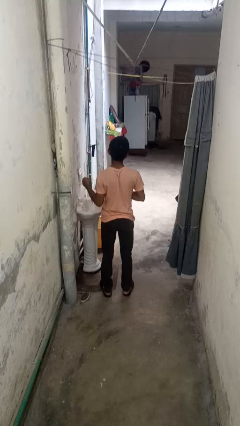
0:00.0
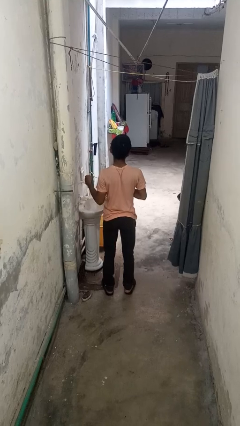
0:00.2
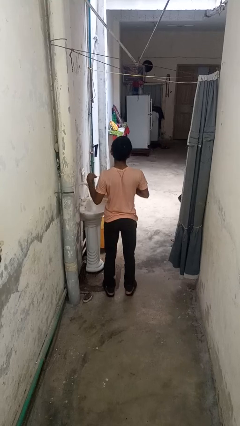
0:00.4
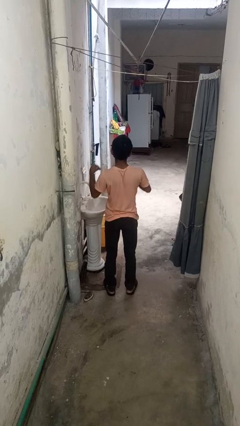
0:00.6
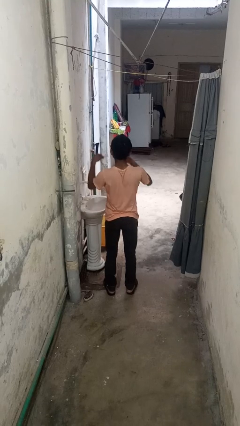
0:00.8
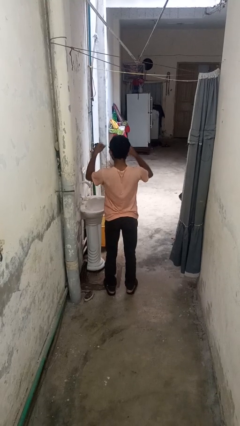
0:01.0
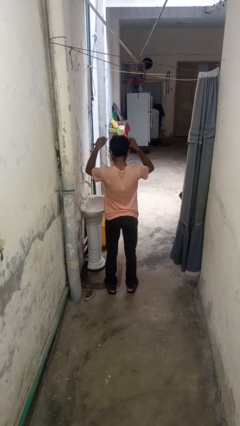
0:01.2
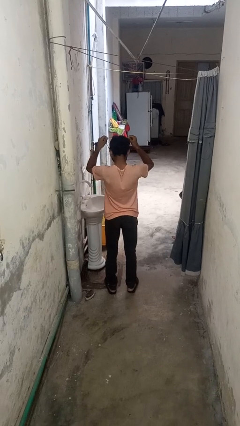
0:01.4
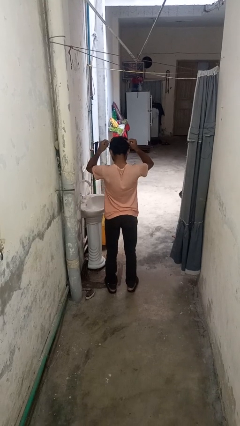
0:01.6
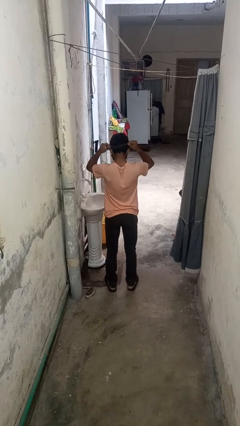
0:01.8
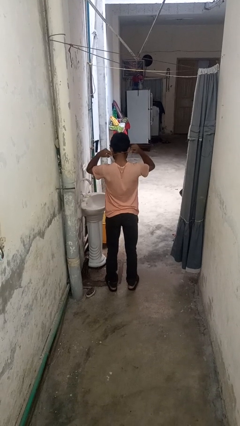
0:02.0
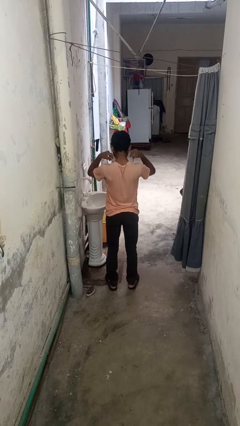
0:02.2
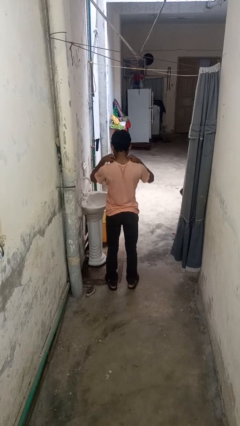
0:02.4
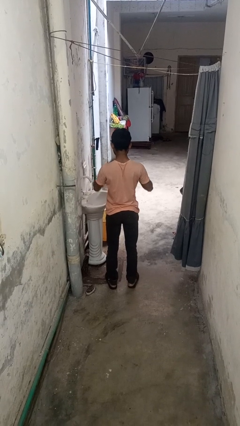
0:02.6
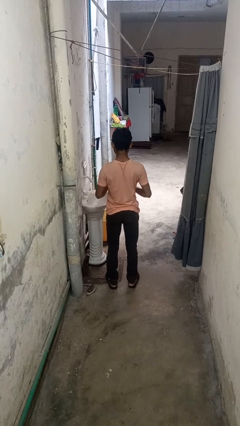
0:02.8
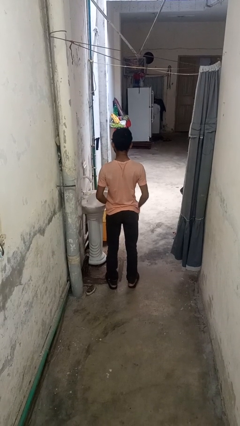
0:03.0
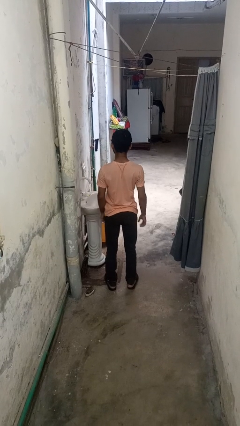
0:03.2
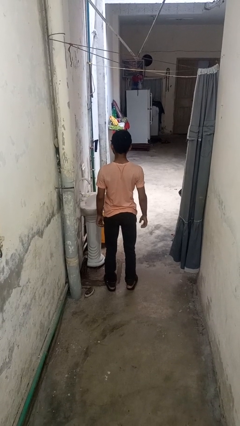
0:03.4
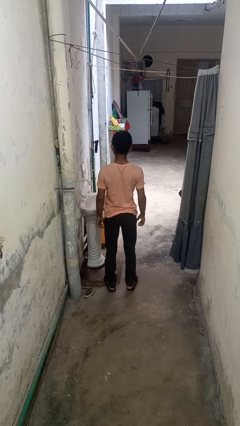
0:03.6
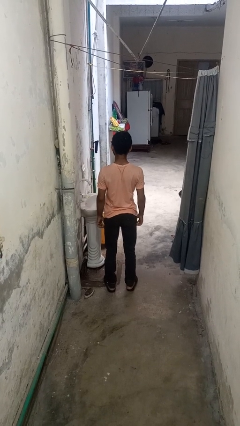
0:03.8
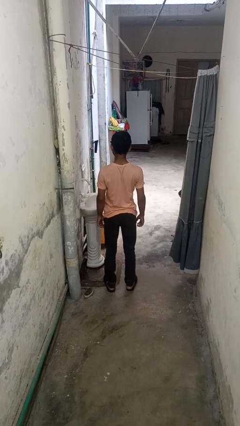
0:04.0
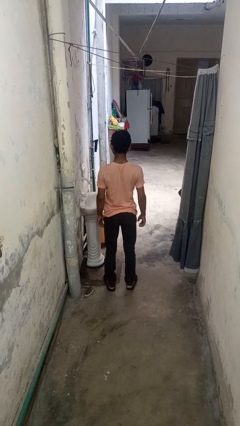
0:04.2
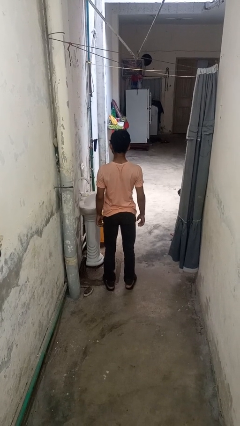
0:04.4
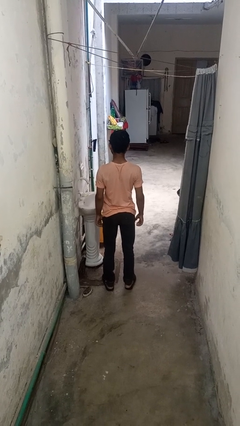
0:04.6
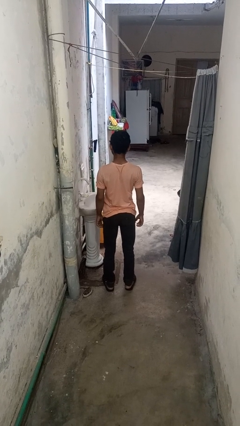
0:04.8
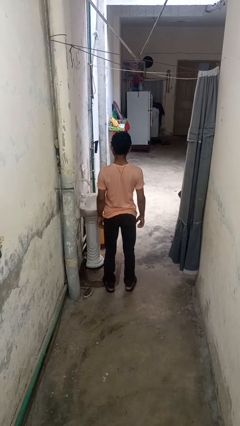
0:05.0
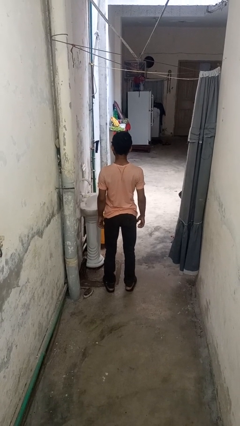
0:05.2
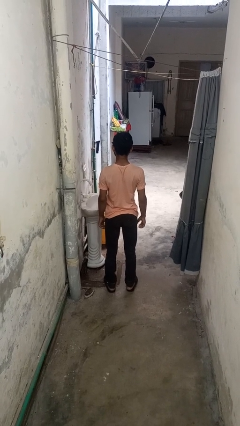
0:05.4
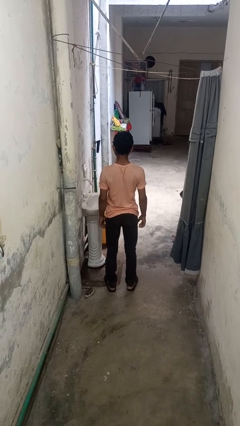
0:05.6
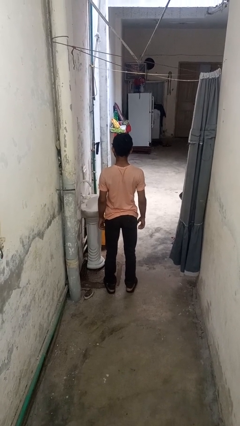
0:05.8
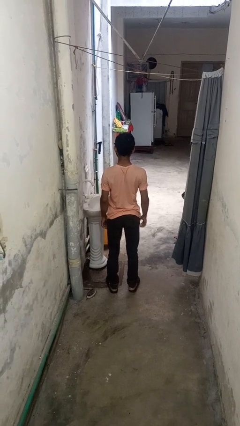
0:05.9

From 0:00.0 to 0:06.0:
person puts on necklace

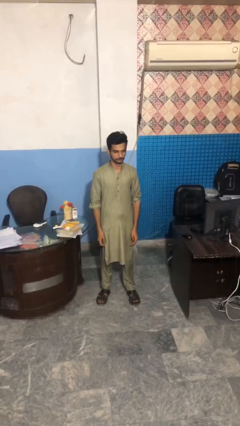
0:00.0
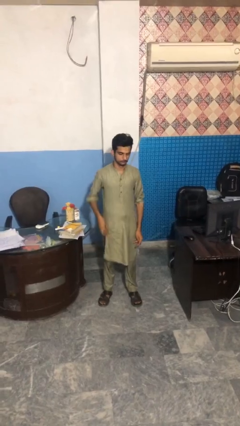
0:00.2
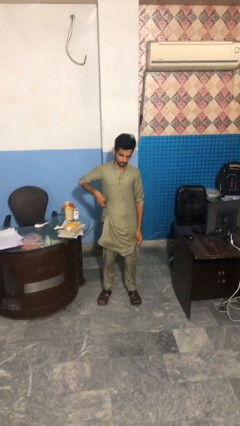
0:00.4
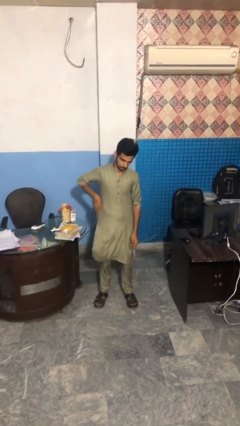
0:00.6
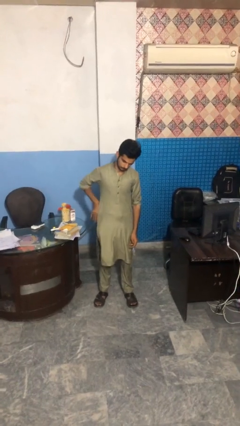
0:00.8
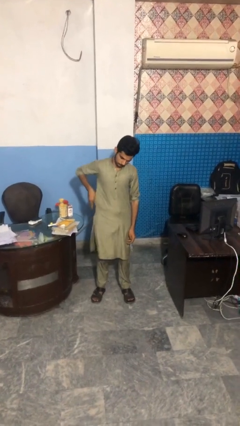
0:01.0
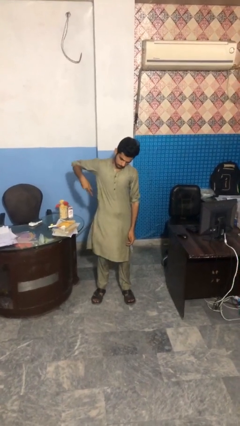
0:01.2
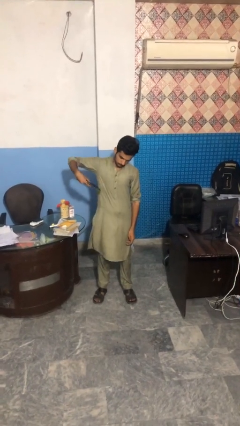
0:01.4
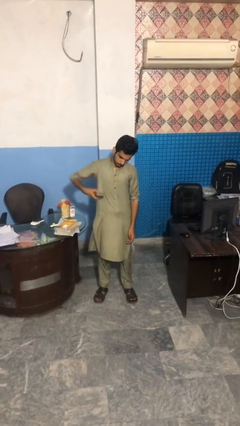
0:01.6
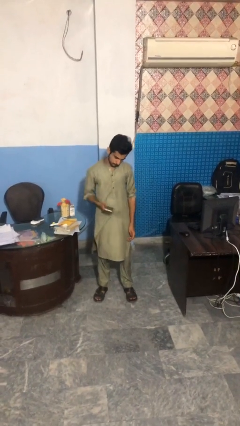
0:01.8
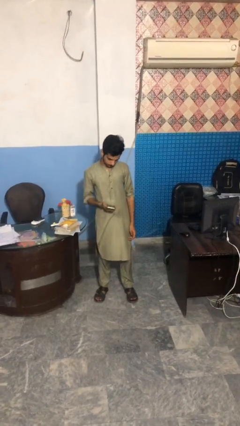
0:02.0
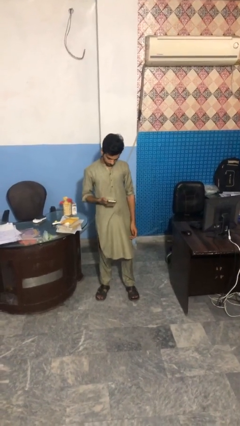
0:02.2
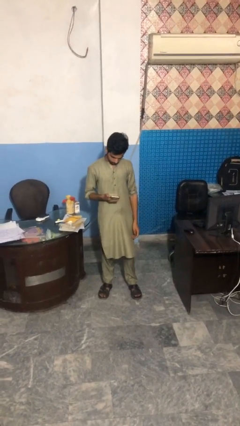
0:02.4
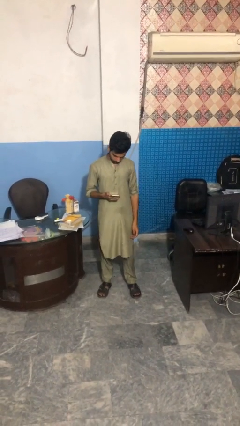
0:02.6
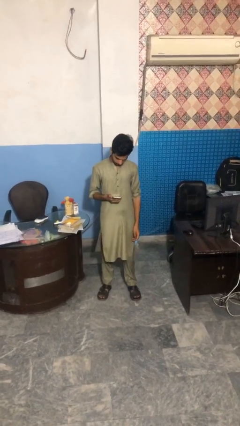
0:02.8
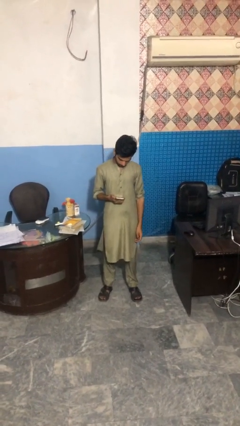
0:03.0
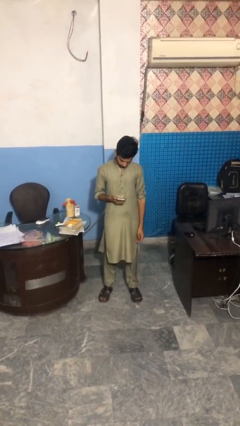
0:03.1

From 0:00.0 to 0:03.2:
person takes phone from pocket

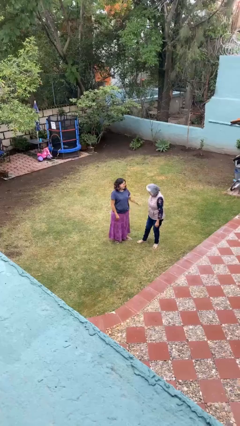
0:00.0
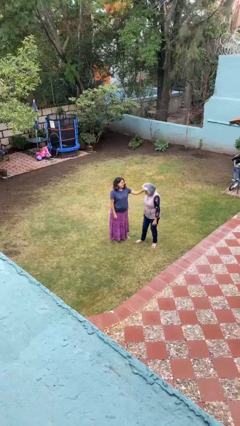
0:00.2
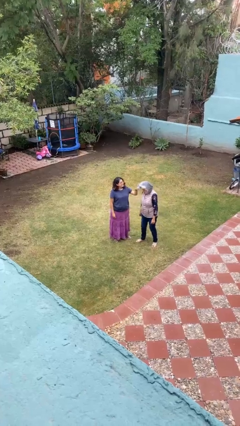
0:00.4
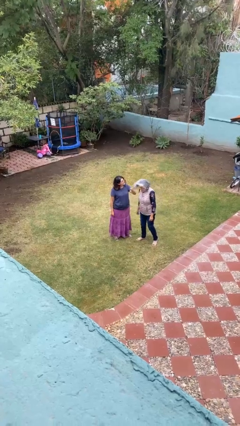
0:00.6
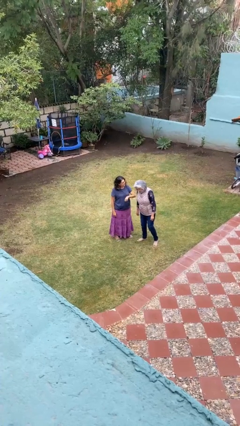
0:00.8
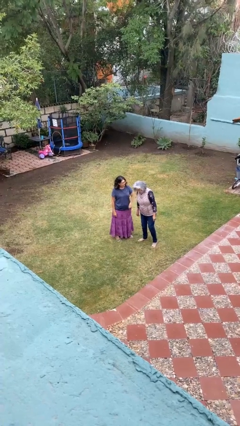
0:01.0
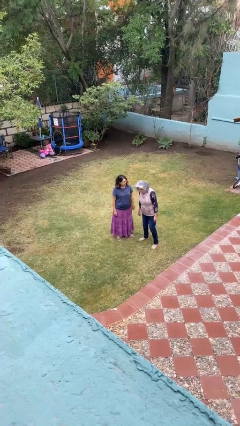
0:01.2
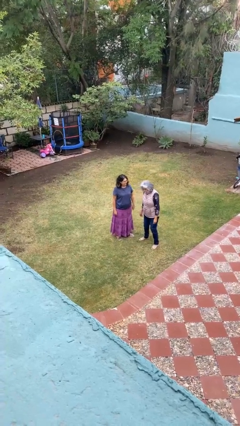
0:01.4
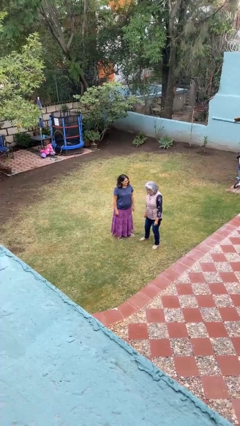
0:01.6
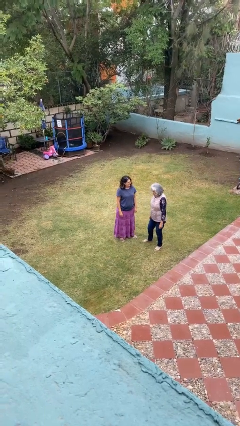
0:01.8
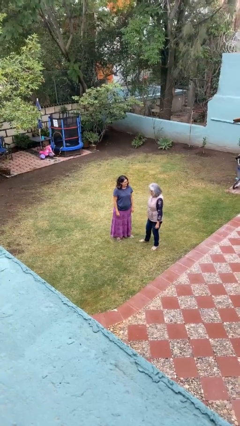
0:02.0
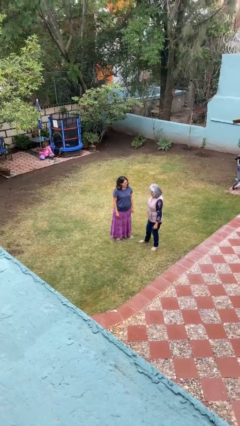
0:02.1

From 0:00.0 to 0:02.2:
person grabs person by hair

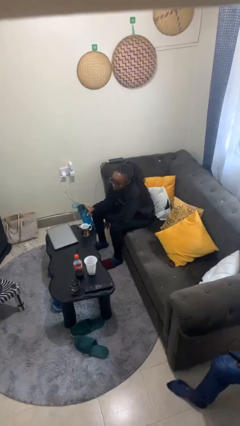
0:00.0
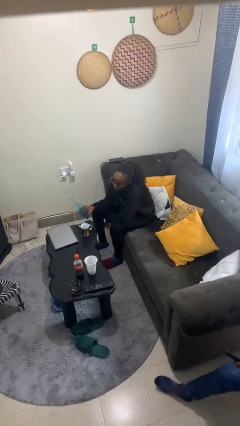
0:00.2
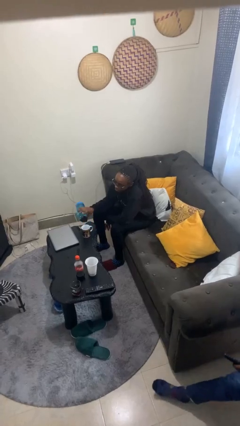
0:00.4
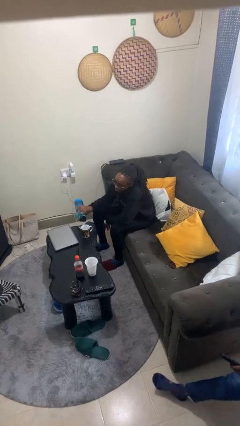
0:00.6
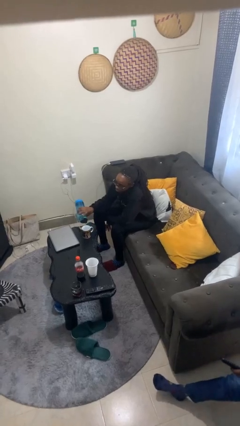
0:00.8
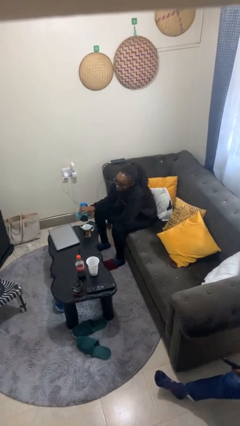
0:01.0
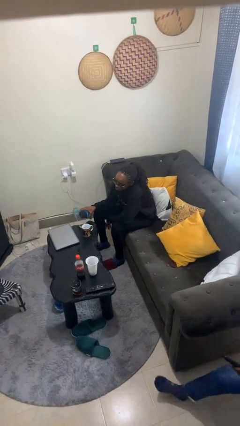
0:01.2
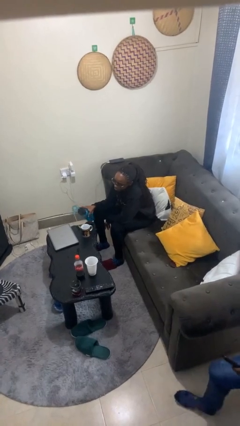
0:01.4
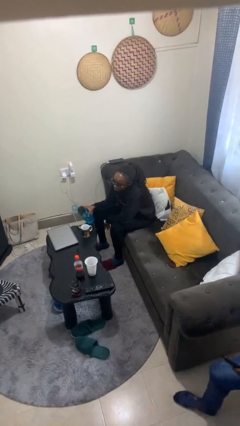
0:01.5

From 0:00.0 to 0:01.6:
person pours liquid into cup

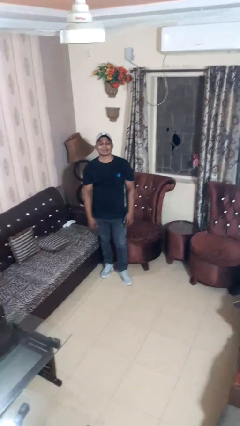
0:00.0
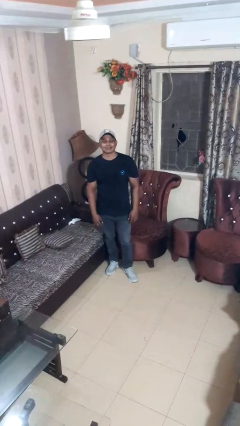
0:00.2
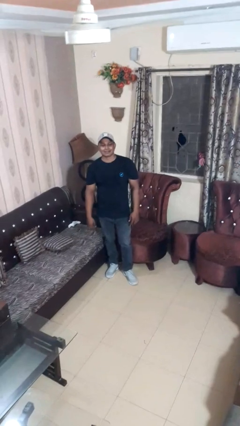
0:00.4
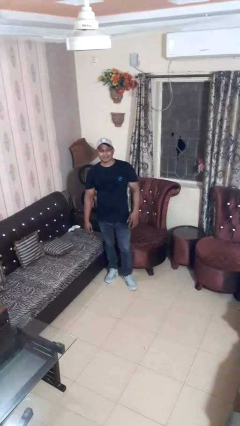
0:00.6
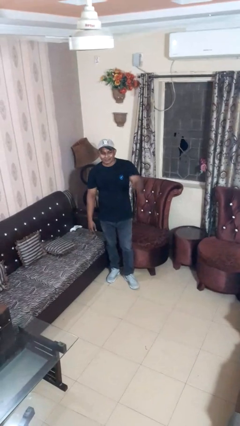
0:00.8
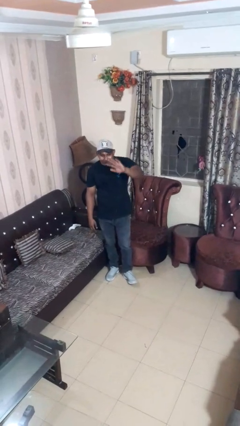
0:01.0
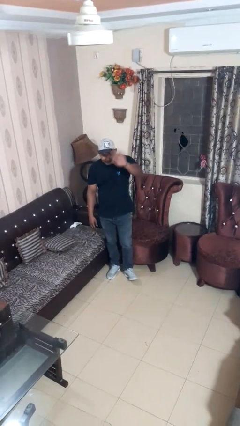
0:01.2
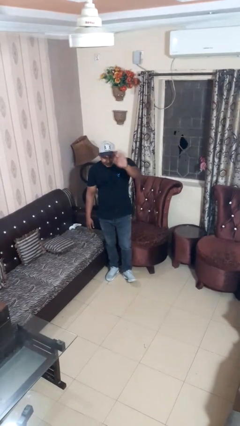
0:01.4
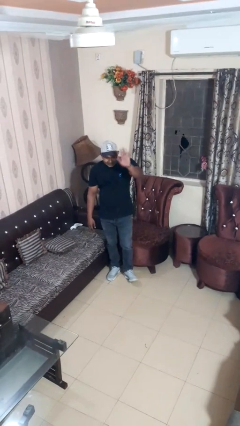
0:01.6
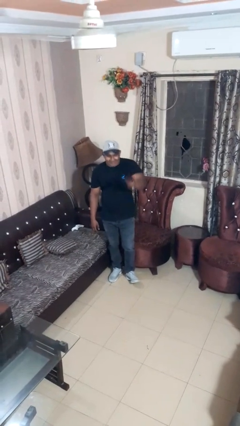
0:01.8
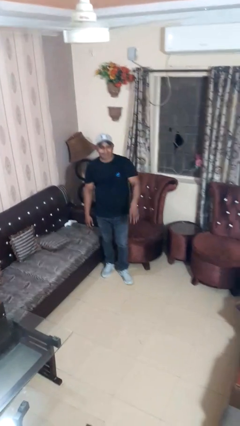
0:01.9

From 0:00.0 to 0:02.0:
person waves at person

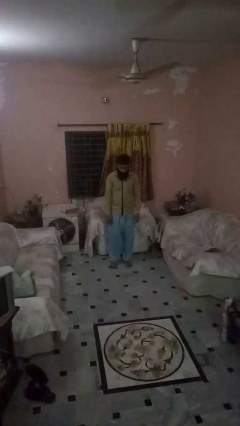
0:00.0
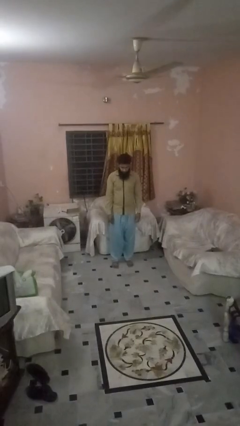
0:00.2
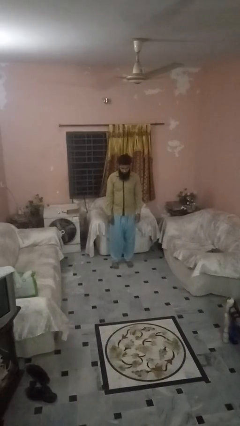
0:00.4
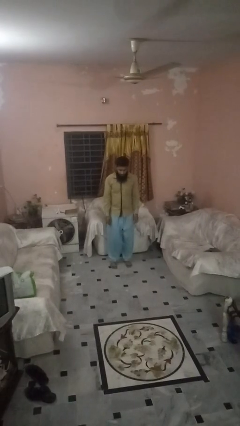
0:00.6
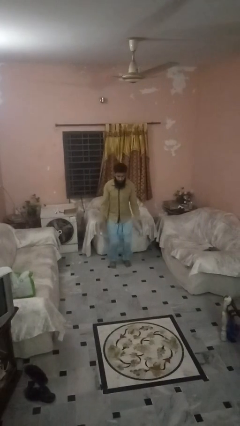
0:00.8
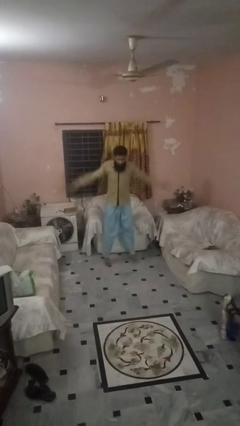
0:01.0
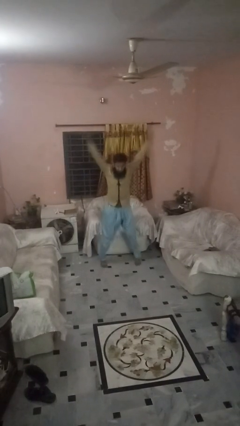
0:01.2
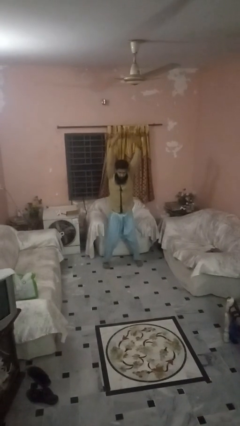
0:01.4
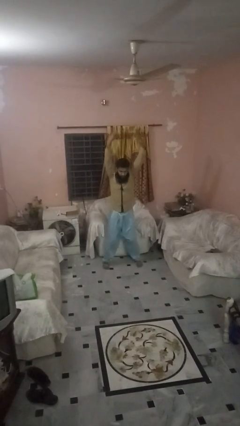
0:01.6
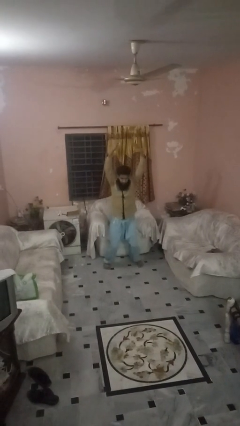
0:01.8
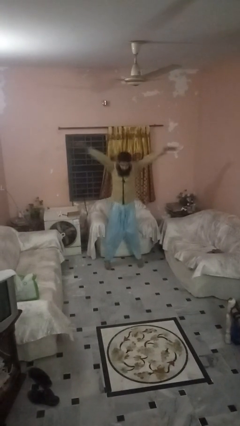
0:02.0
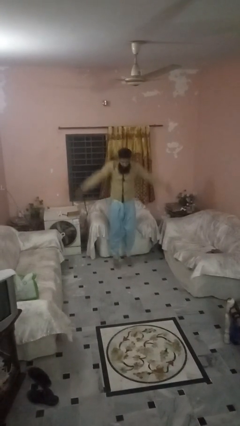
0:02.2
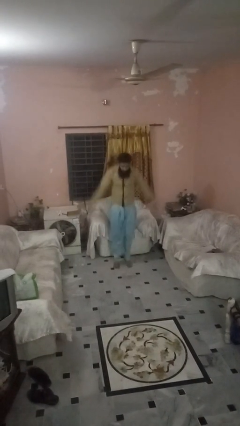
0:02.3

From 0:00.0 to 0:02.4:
person exercises with jumping jacks

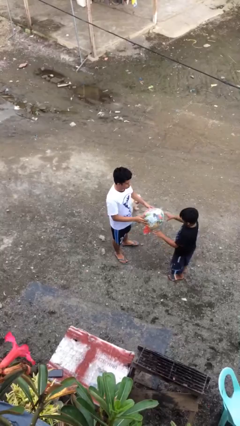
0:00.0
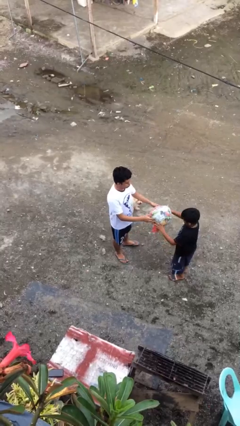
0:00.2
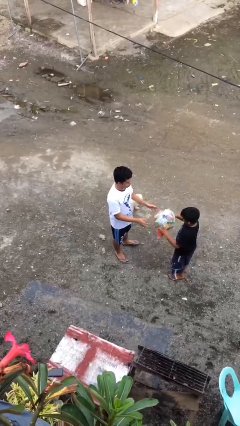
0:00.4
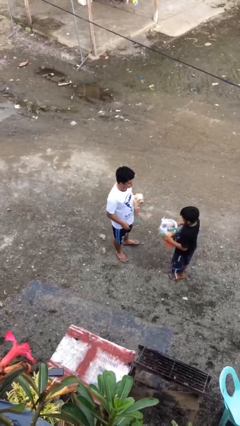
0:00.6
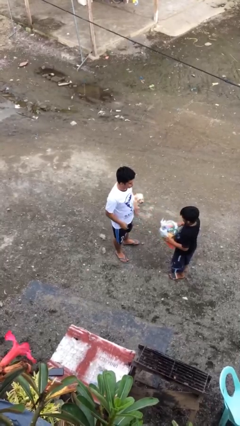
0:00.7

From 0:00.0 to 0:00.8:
person transfers object to person
